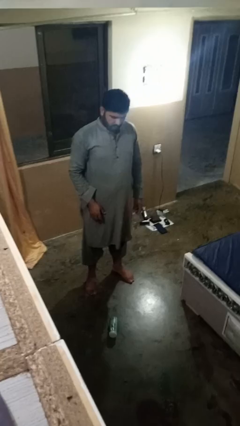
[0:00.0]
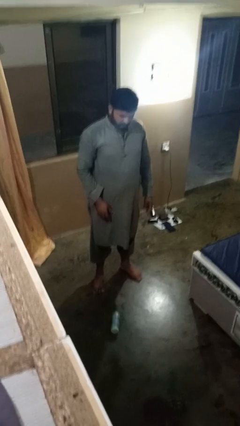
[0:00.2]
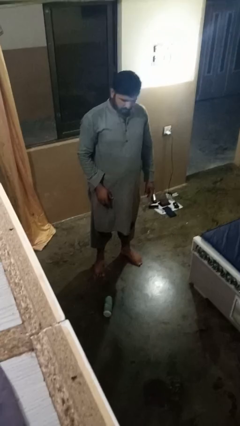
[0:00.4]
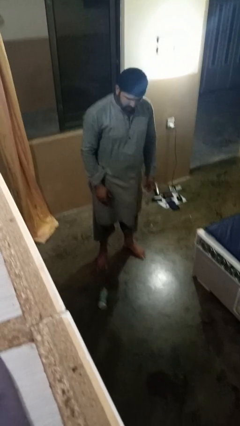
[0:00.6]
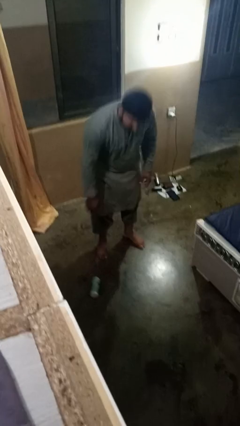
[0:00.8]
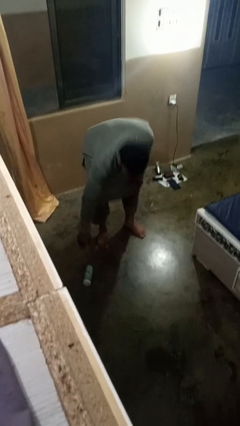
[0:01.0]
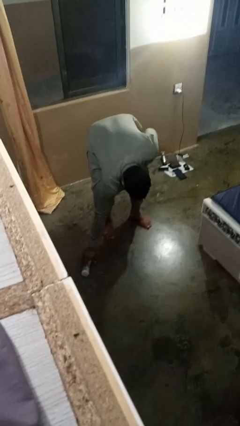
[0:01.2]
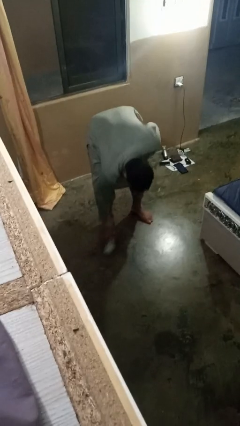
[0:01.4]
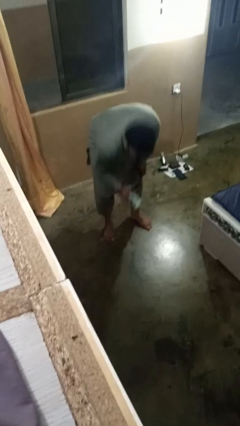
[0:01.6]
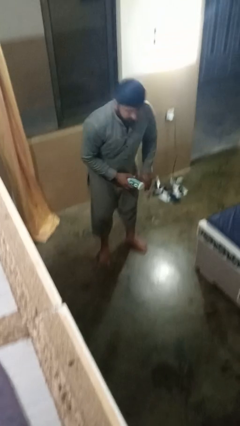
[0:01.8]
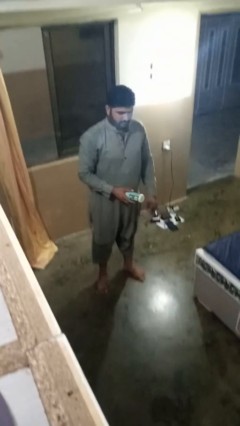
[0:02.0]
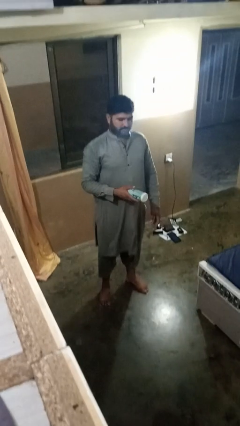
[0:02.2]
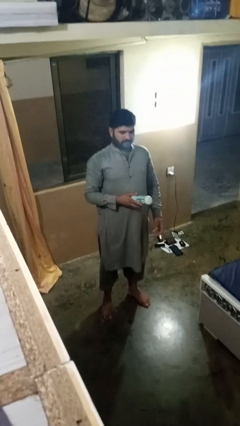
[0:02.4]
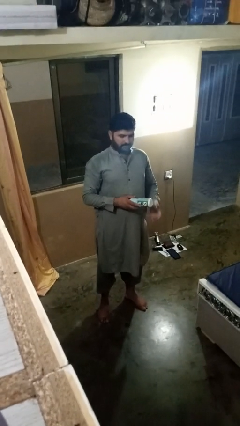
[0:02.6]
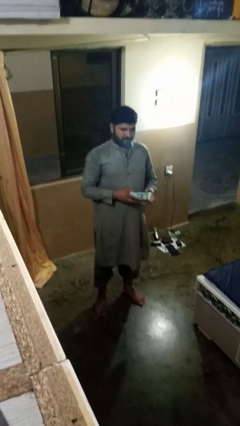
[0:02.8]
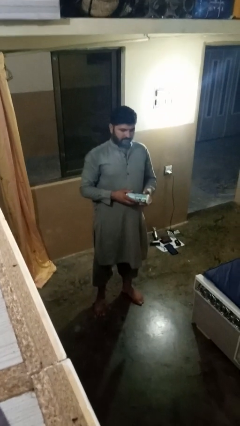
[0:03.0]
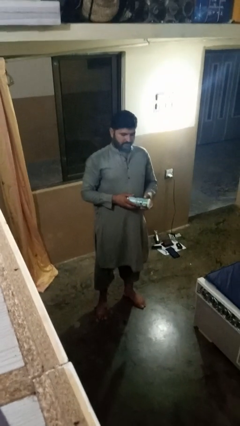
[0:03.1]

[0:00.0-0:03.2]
person picks up object from floor

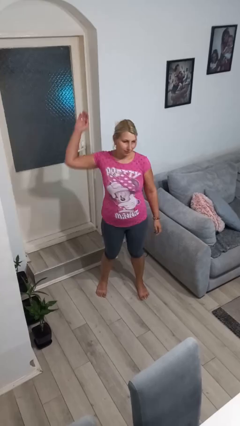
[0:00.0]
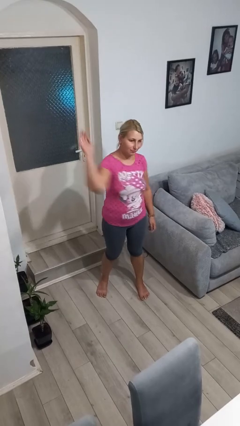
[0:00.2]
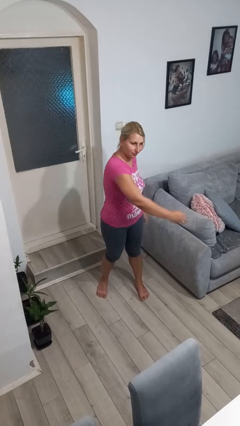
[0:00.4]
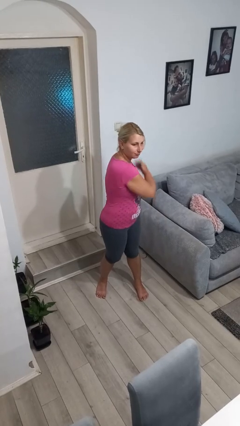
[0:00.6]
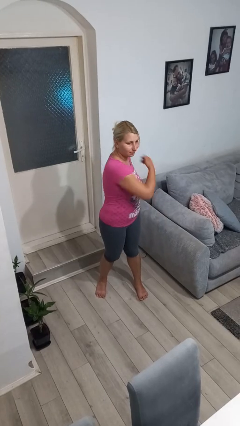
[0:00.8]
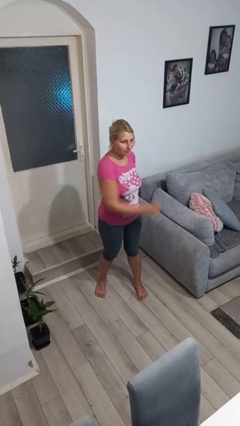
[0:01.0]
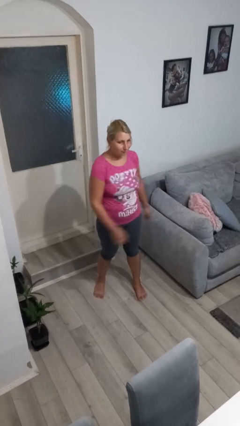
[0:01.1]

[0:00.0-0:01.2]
person punches

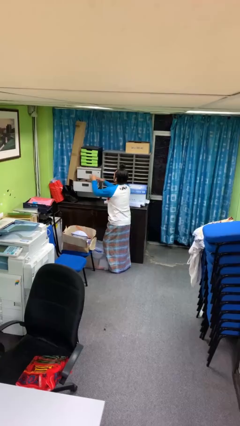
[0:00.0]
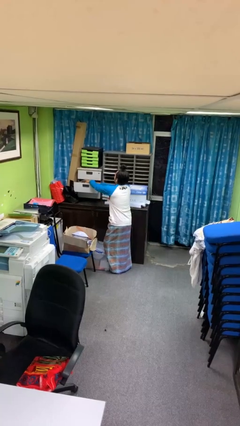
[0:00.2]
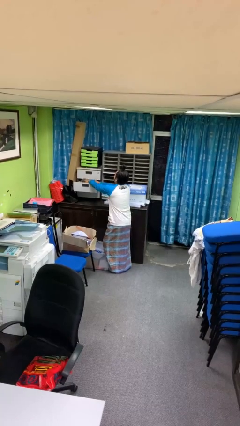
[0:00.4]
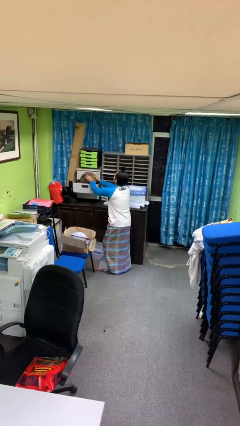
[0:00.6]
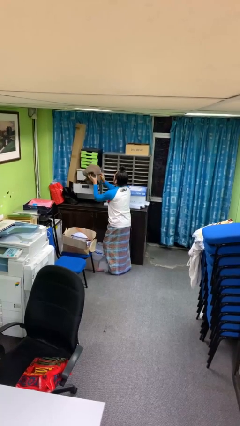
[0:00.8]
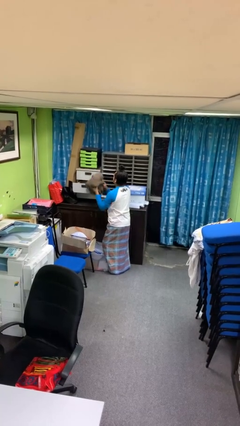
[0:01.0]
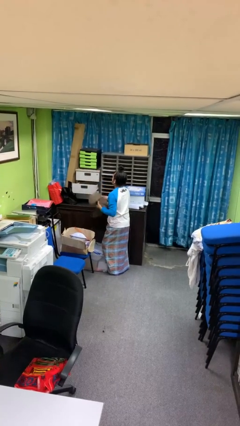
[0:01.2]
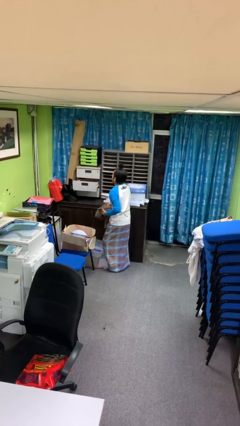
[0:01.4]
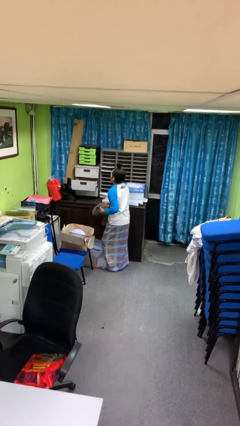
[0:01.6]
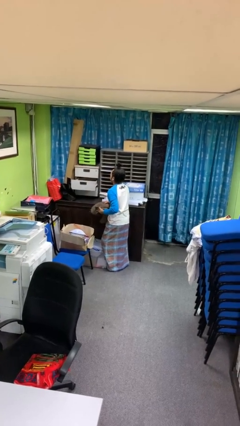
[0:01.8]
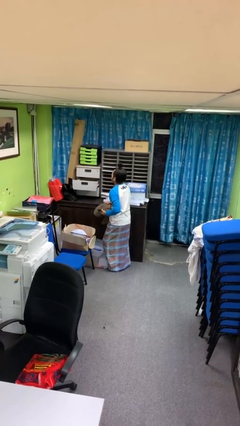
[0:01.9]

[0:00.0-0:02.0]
person takes clothes from dresser

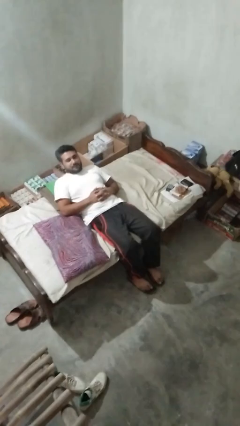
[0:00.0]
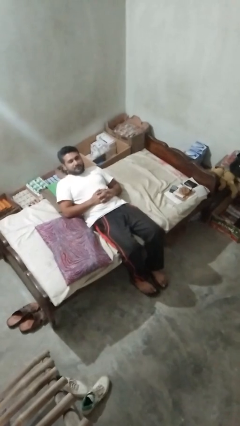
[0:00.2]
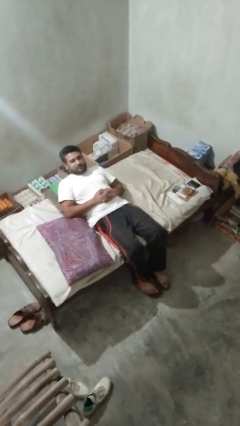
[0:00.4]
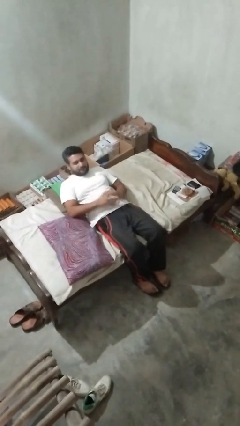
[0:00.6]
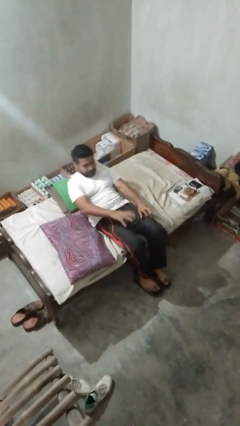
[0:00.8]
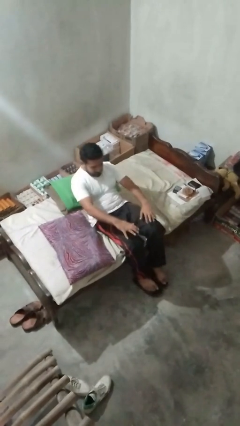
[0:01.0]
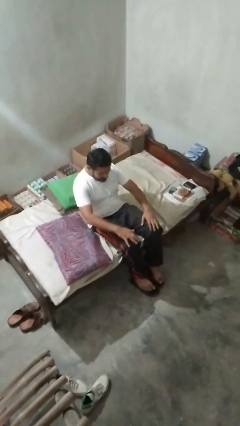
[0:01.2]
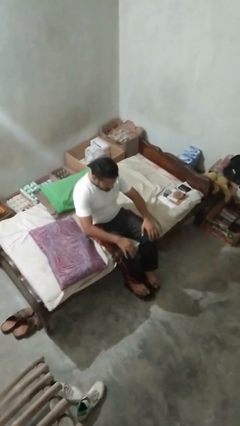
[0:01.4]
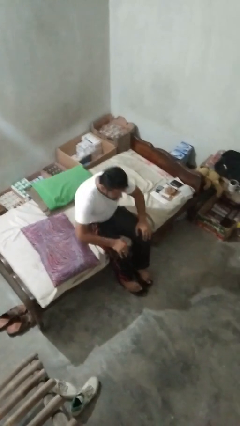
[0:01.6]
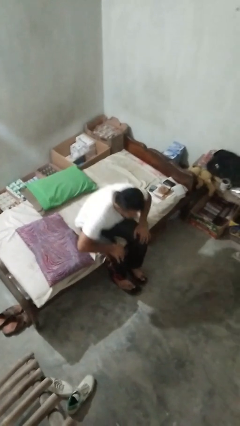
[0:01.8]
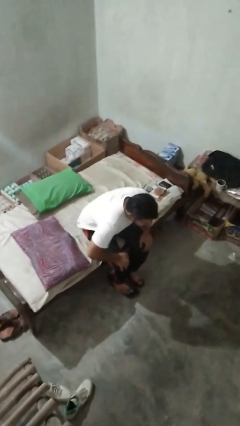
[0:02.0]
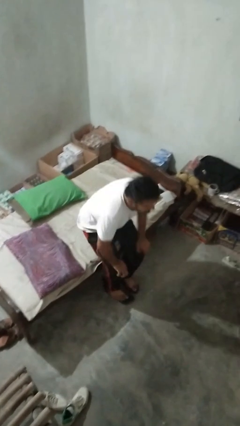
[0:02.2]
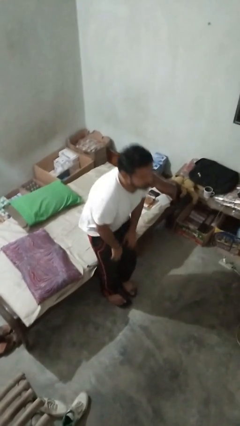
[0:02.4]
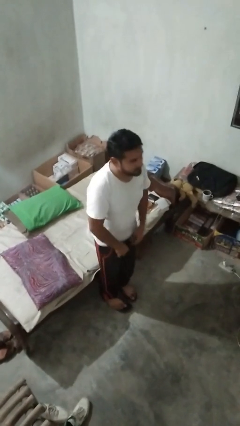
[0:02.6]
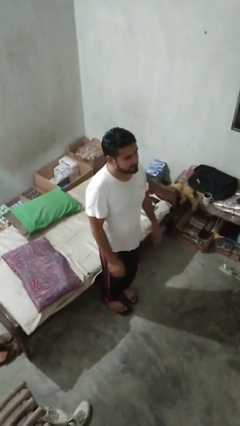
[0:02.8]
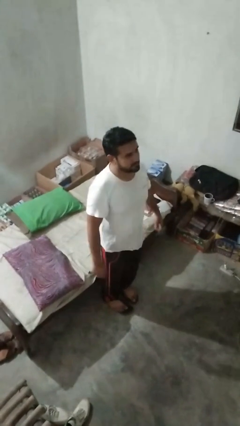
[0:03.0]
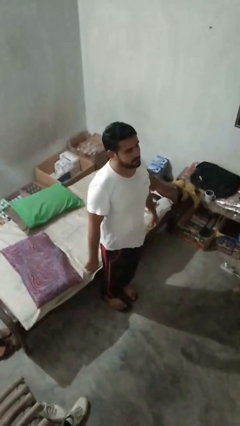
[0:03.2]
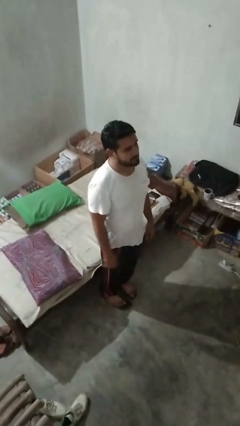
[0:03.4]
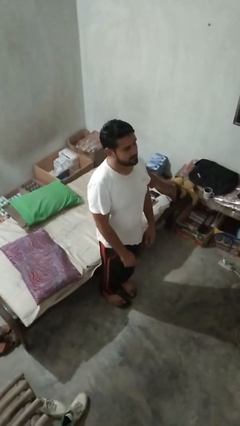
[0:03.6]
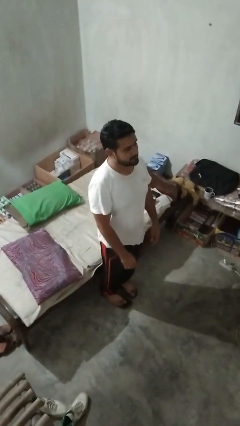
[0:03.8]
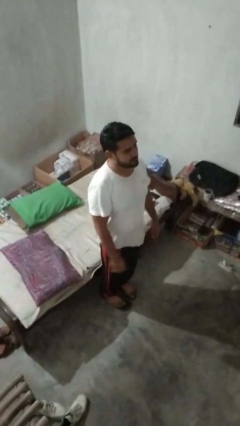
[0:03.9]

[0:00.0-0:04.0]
person stands up

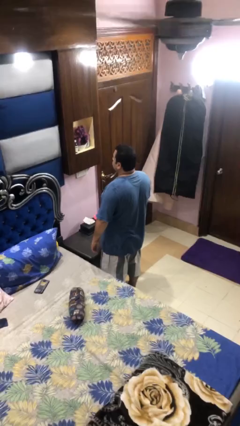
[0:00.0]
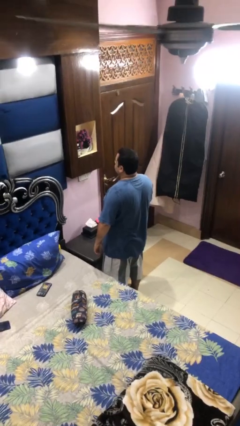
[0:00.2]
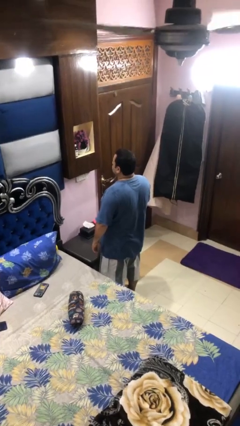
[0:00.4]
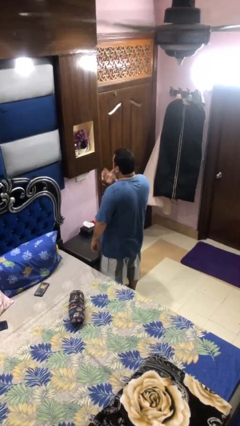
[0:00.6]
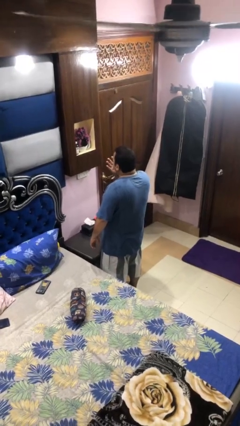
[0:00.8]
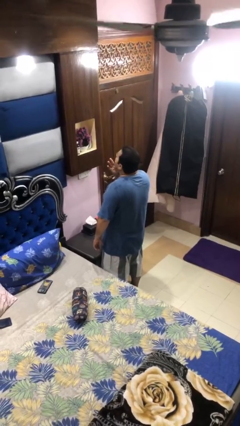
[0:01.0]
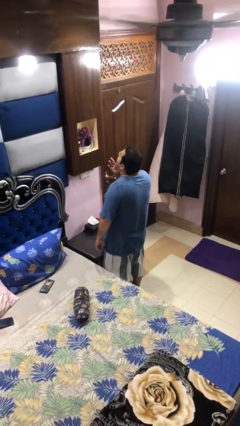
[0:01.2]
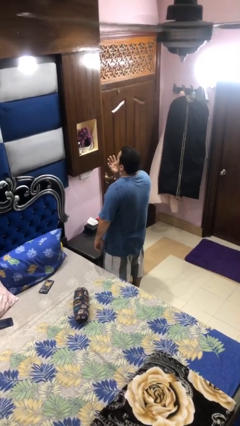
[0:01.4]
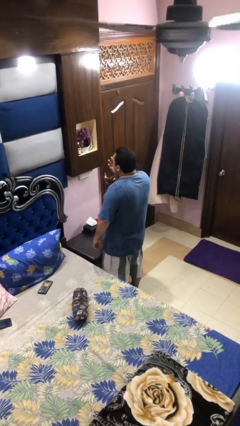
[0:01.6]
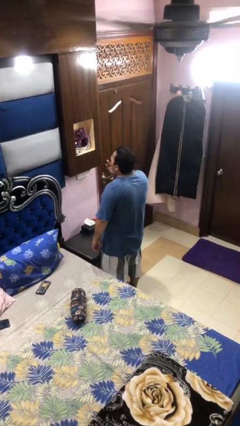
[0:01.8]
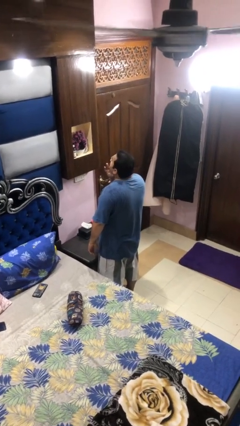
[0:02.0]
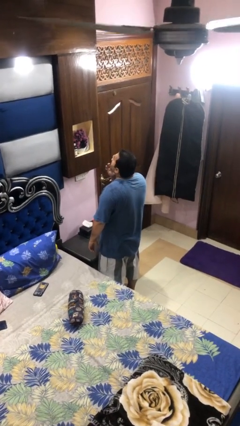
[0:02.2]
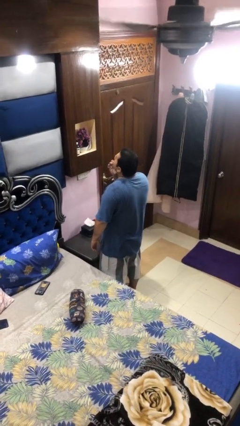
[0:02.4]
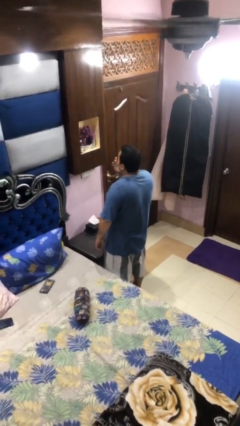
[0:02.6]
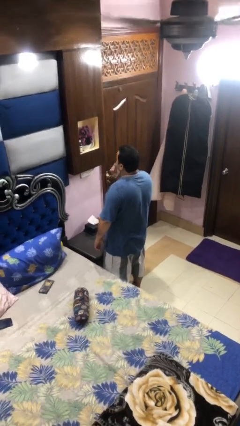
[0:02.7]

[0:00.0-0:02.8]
person licks fingers

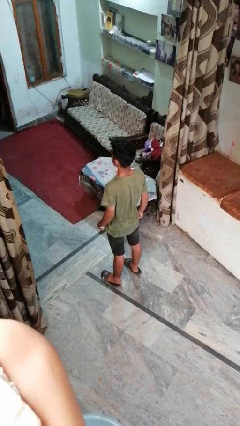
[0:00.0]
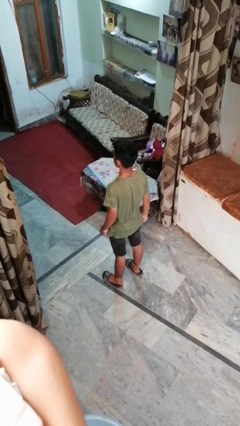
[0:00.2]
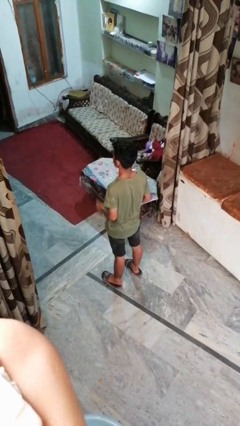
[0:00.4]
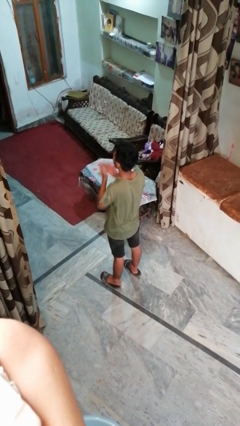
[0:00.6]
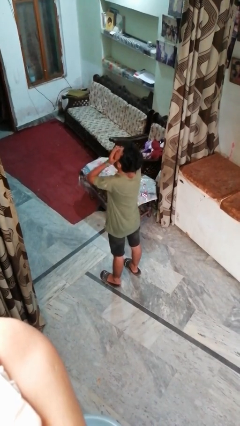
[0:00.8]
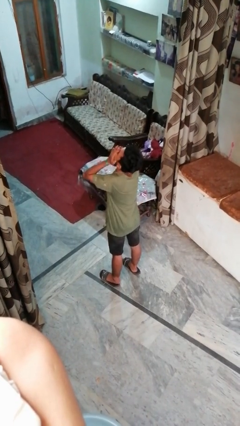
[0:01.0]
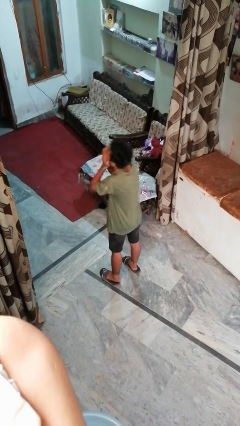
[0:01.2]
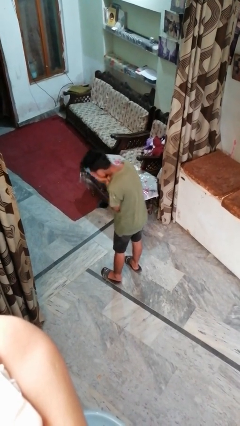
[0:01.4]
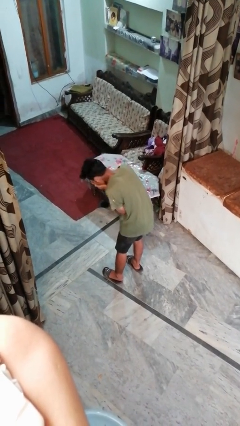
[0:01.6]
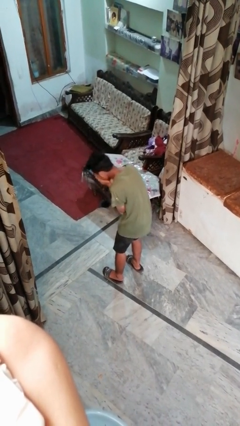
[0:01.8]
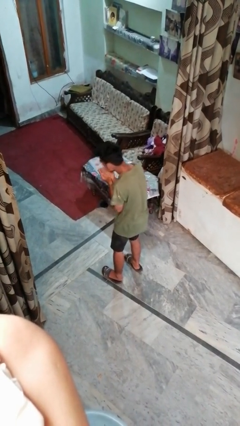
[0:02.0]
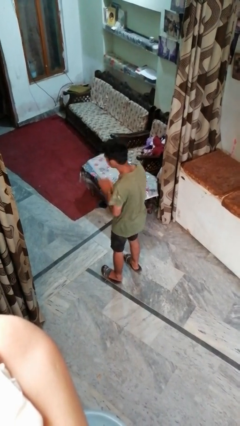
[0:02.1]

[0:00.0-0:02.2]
person sneezes into hand

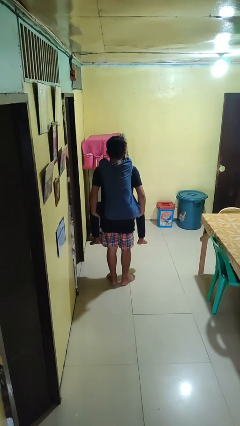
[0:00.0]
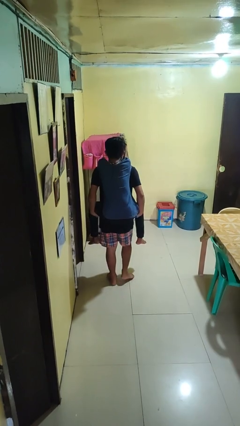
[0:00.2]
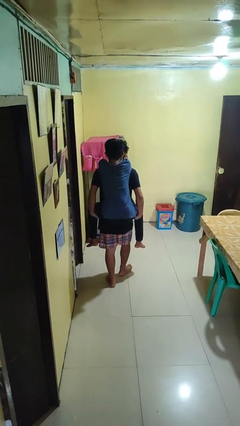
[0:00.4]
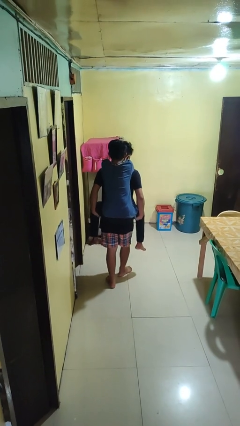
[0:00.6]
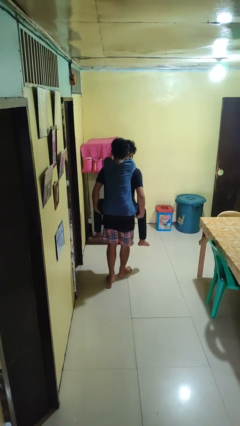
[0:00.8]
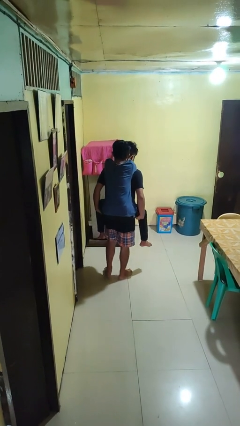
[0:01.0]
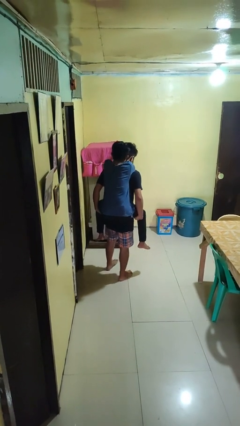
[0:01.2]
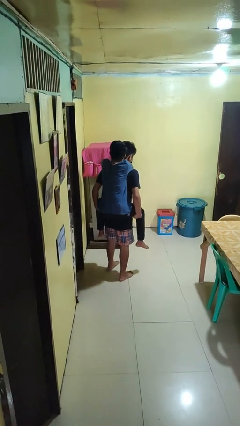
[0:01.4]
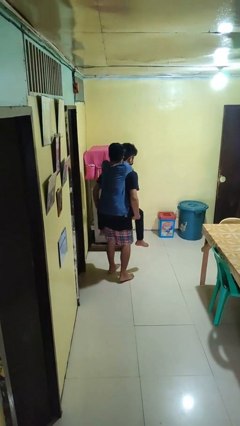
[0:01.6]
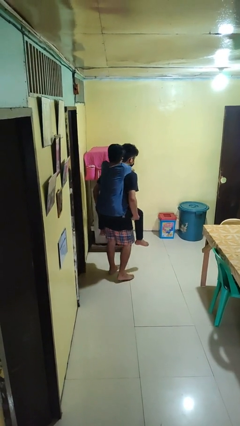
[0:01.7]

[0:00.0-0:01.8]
person carries person on back
